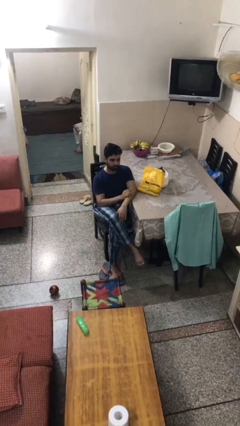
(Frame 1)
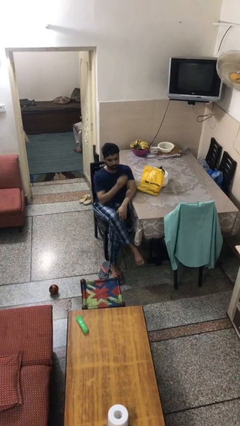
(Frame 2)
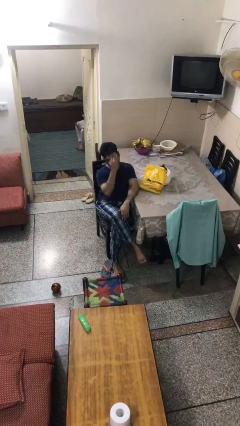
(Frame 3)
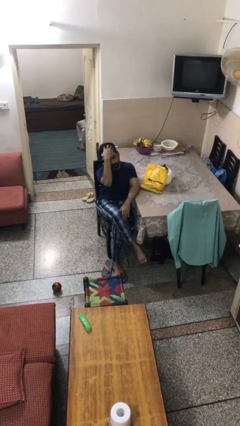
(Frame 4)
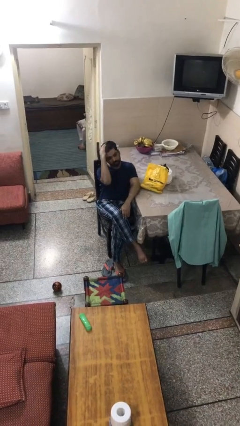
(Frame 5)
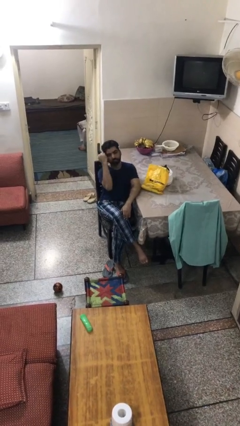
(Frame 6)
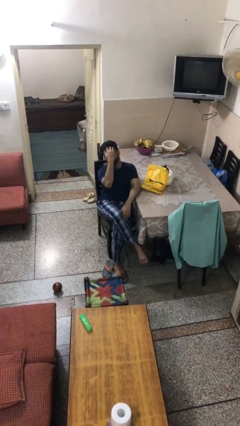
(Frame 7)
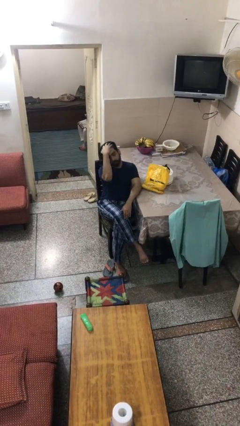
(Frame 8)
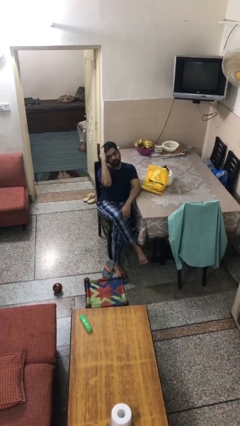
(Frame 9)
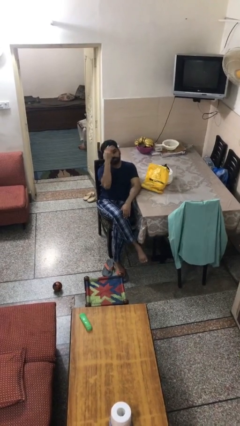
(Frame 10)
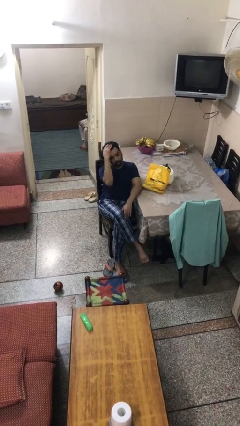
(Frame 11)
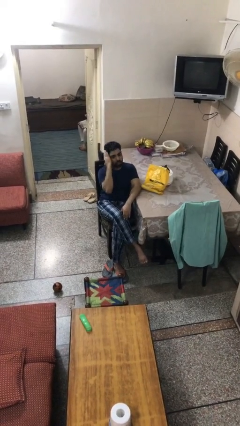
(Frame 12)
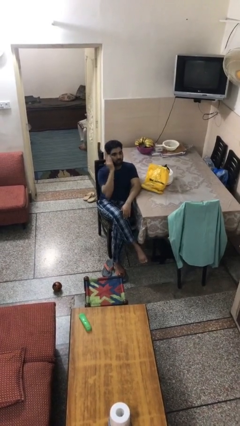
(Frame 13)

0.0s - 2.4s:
person strokes hair

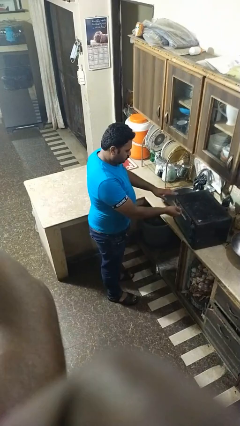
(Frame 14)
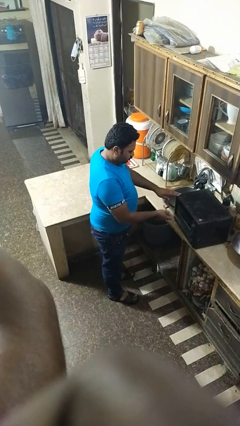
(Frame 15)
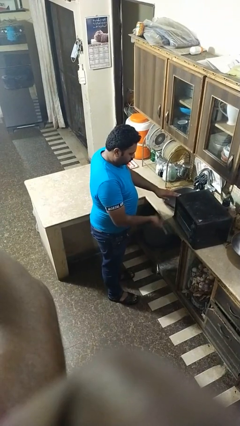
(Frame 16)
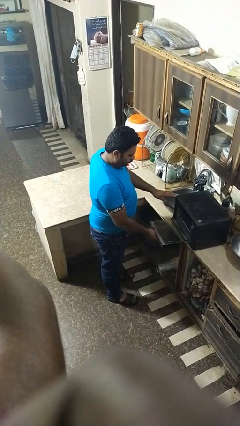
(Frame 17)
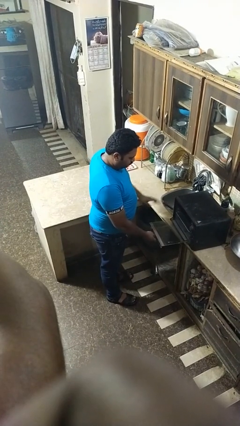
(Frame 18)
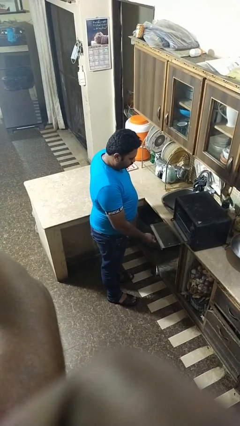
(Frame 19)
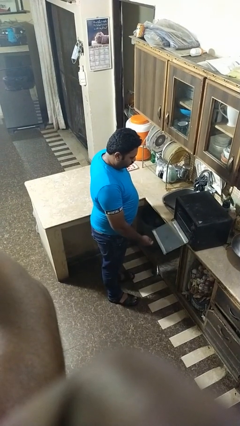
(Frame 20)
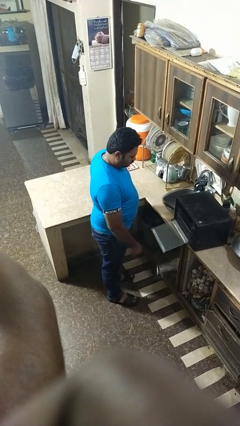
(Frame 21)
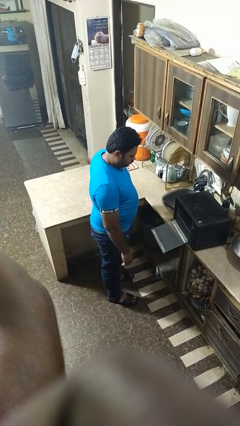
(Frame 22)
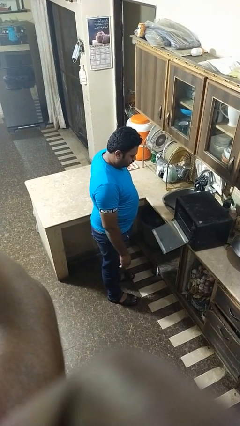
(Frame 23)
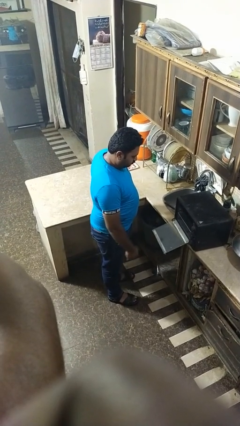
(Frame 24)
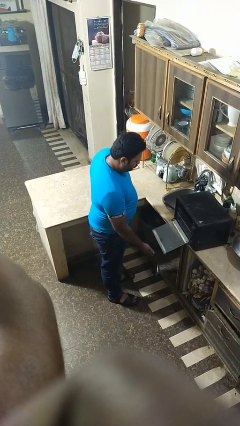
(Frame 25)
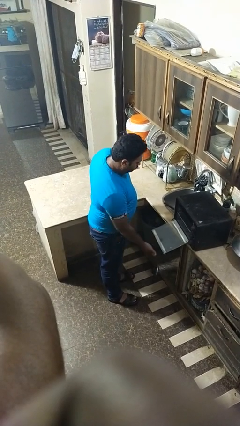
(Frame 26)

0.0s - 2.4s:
person opens oven door

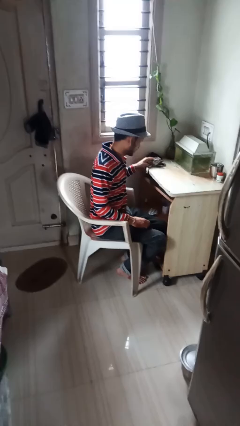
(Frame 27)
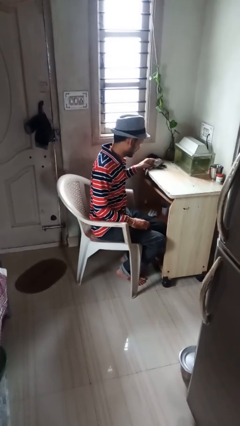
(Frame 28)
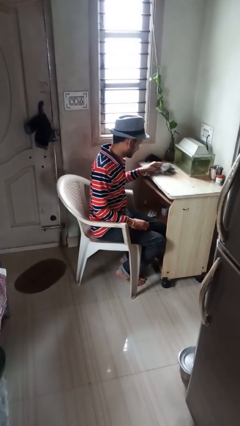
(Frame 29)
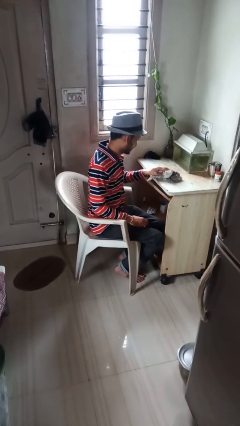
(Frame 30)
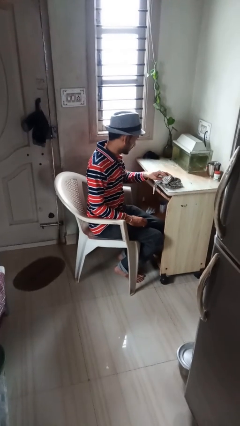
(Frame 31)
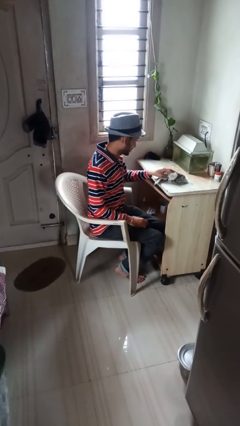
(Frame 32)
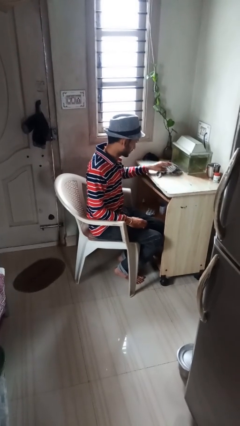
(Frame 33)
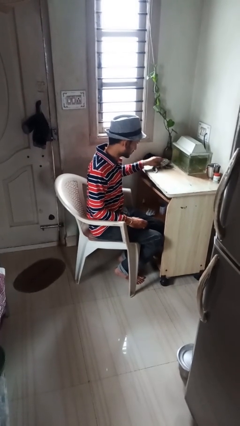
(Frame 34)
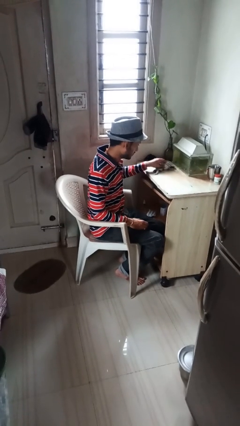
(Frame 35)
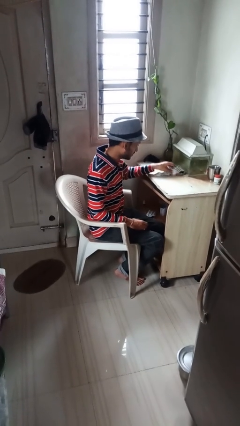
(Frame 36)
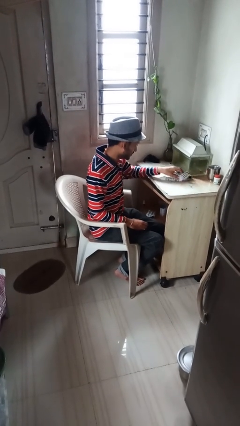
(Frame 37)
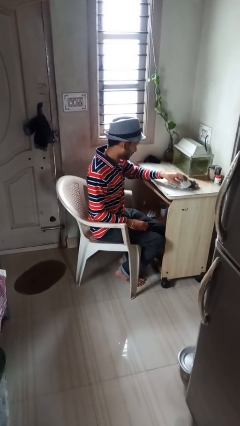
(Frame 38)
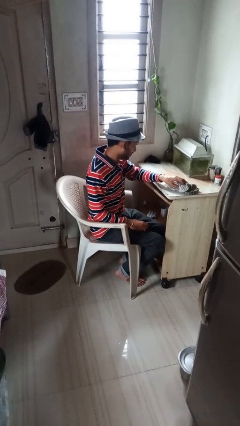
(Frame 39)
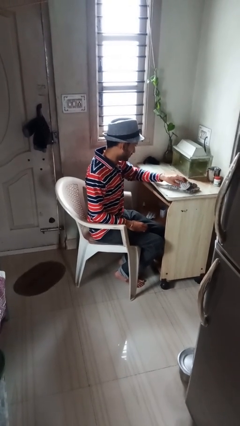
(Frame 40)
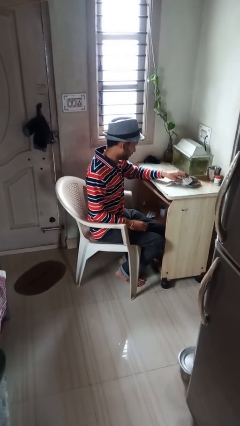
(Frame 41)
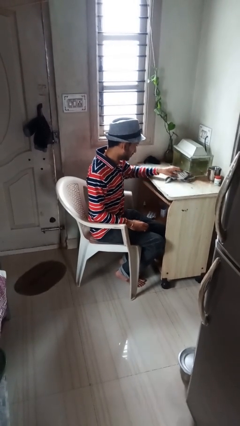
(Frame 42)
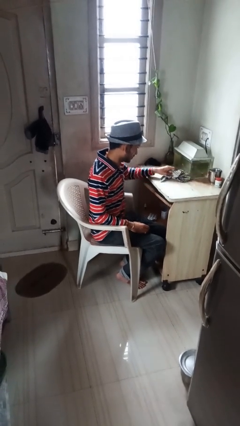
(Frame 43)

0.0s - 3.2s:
person cleans table with rag

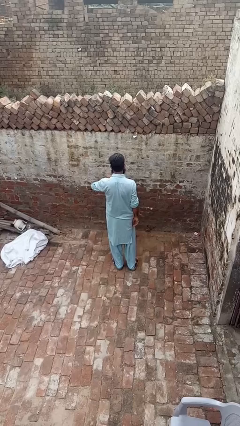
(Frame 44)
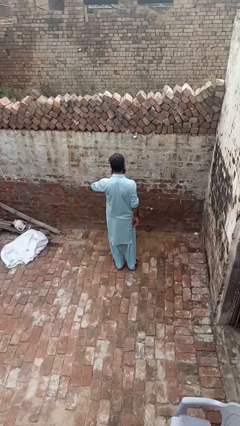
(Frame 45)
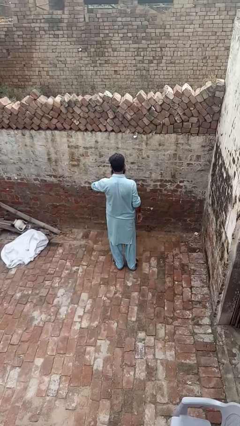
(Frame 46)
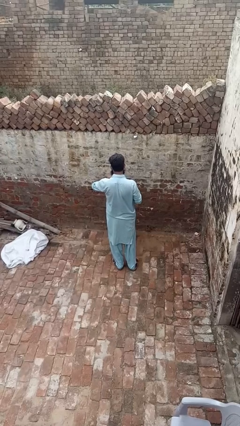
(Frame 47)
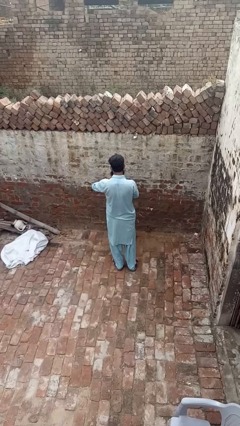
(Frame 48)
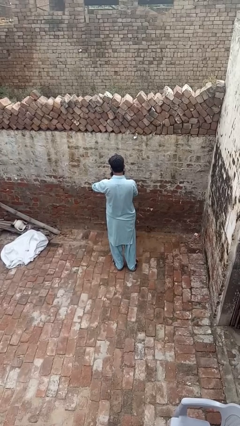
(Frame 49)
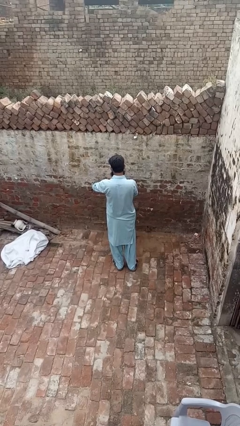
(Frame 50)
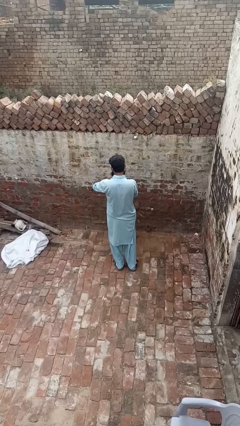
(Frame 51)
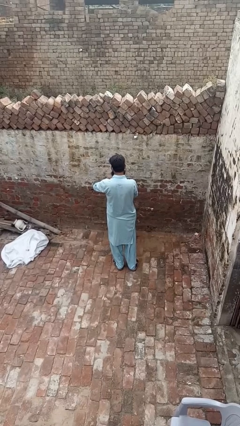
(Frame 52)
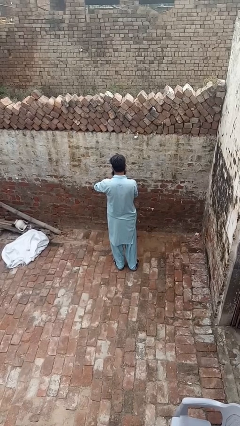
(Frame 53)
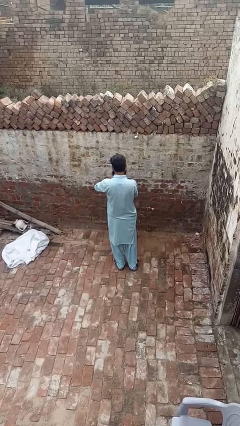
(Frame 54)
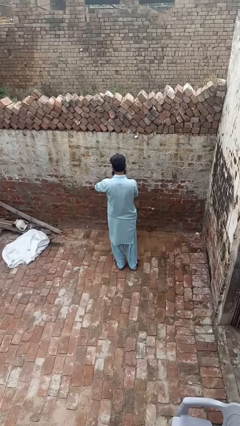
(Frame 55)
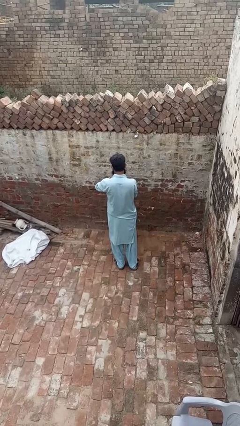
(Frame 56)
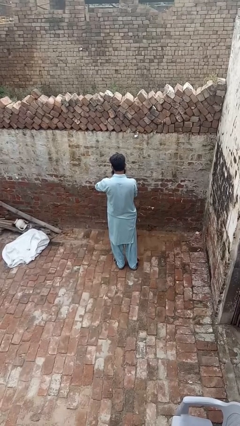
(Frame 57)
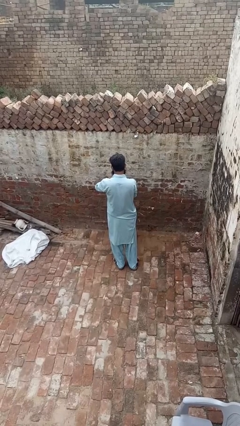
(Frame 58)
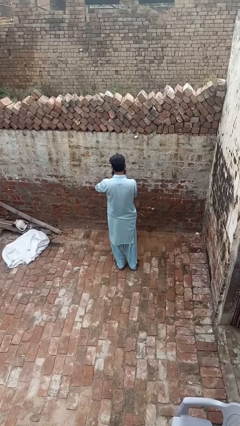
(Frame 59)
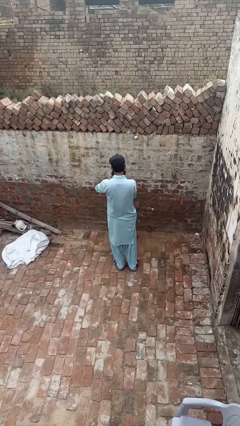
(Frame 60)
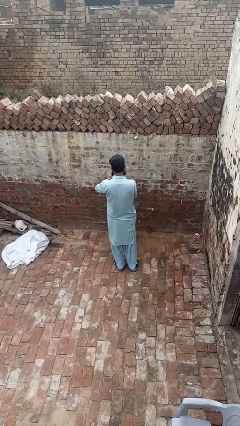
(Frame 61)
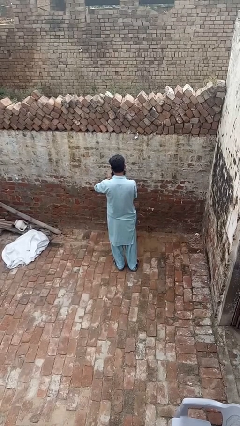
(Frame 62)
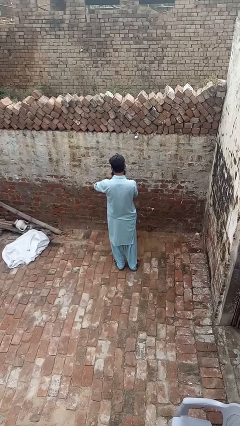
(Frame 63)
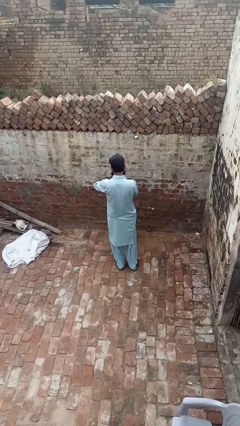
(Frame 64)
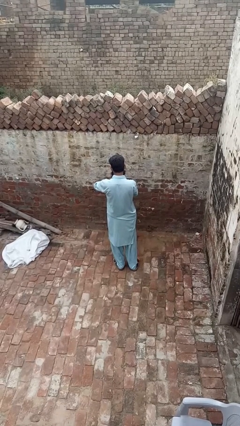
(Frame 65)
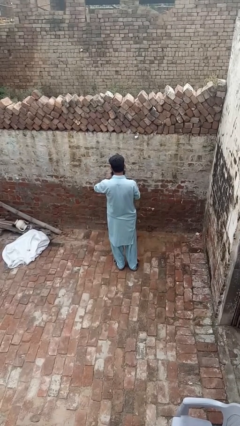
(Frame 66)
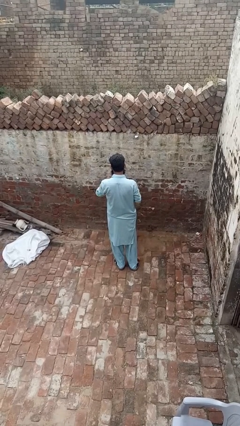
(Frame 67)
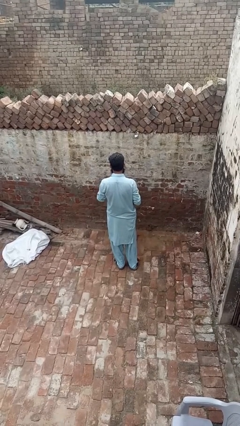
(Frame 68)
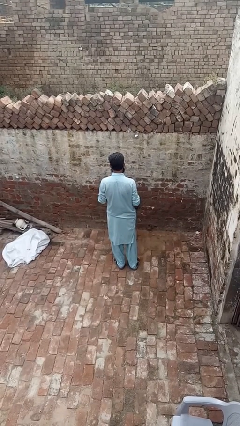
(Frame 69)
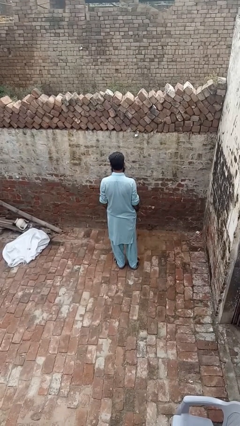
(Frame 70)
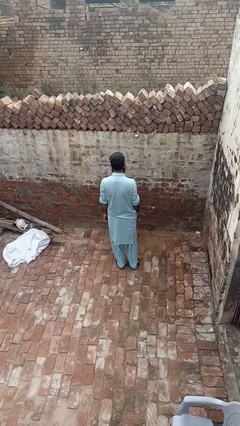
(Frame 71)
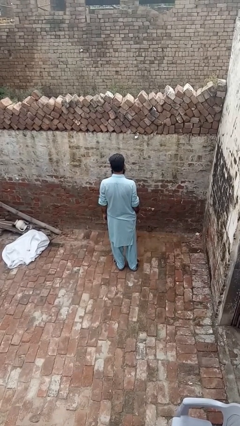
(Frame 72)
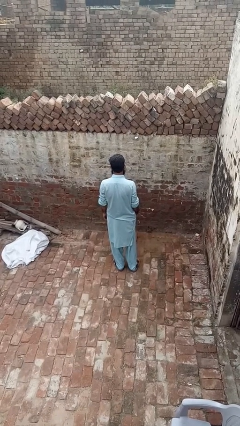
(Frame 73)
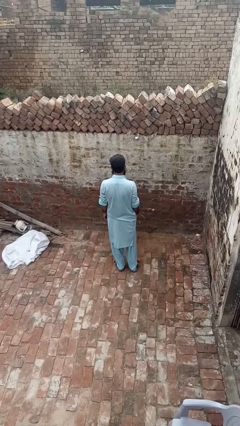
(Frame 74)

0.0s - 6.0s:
person takes off wristwatch

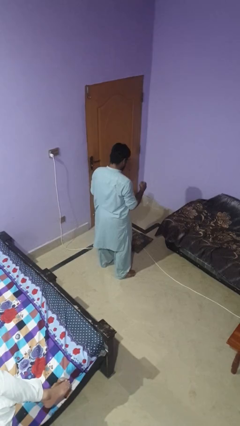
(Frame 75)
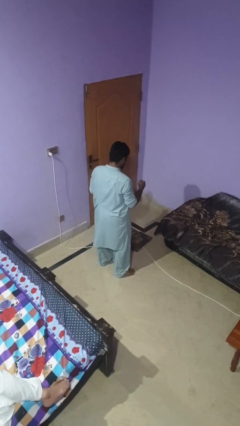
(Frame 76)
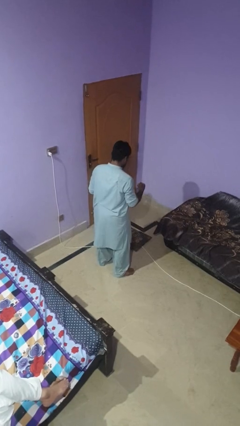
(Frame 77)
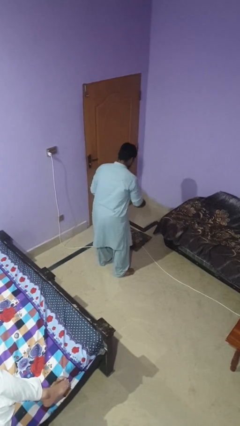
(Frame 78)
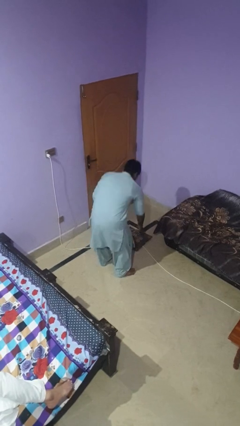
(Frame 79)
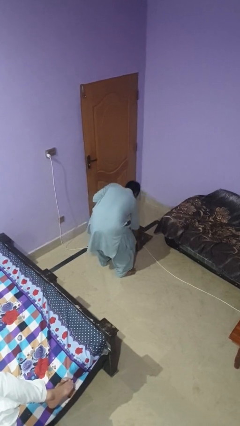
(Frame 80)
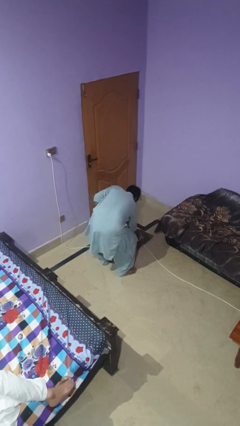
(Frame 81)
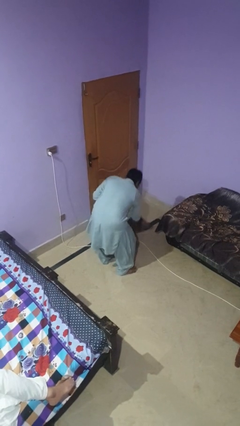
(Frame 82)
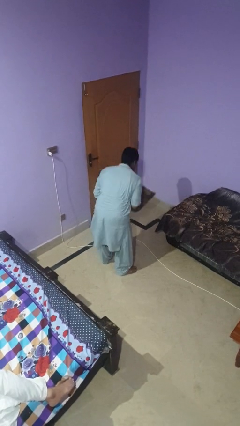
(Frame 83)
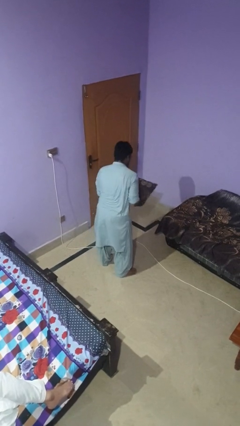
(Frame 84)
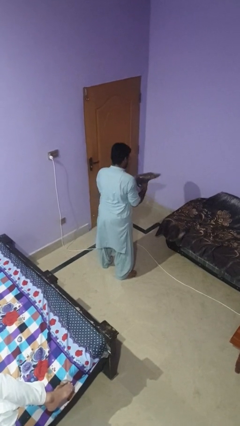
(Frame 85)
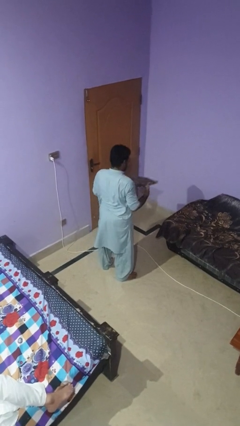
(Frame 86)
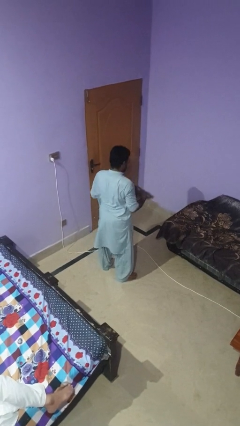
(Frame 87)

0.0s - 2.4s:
person picks up object from floor

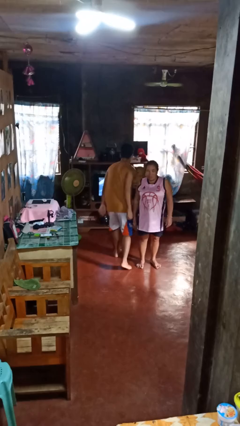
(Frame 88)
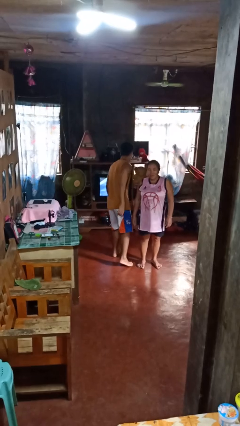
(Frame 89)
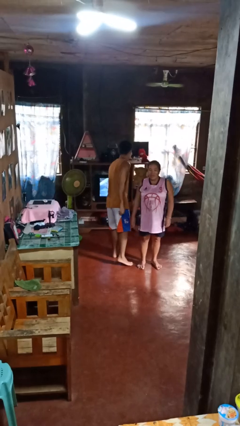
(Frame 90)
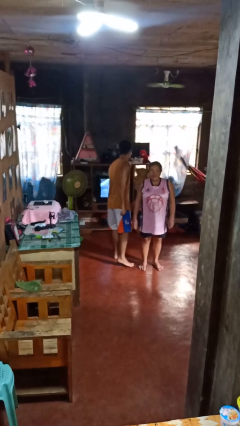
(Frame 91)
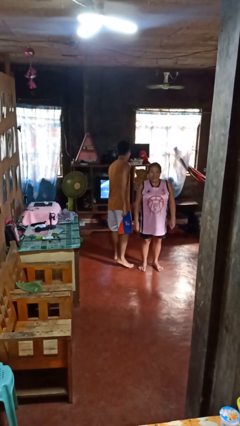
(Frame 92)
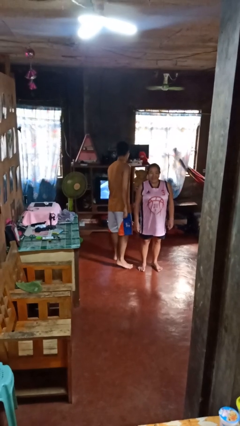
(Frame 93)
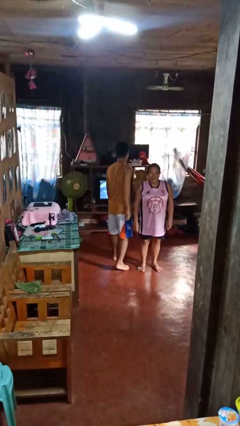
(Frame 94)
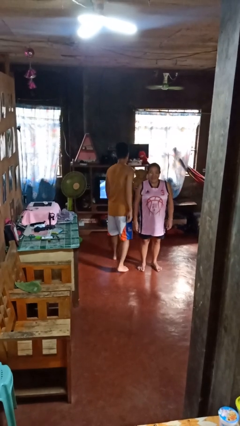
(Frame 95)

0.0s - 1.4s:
person bumps into person
